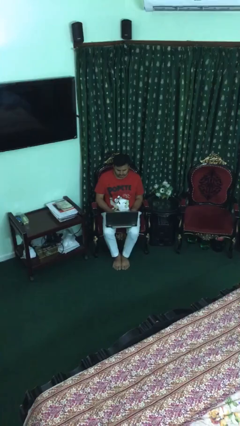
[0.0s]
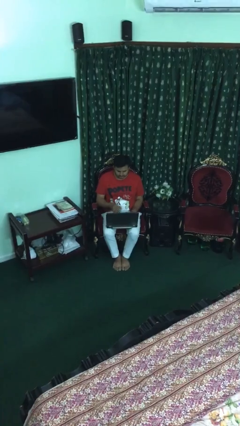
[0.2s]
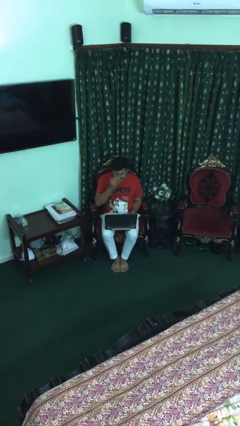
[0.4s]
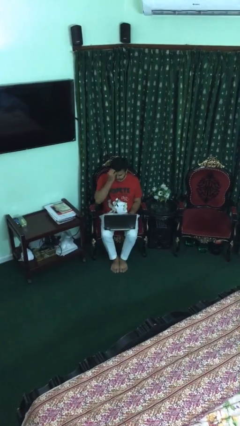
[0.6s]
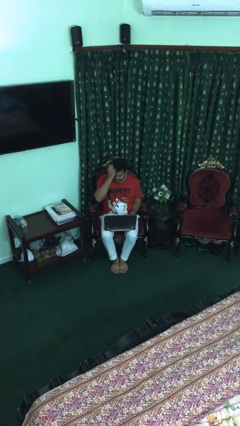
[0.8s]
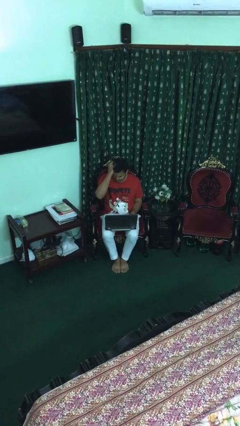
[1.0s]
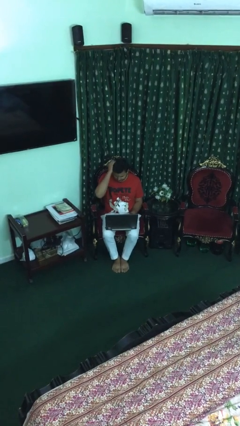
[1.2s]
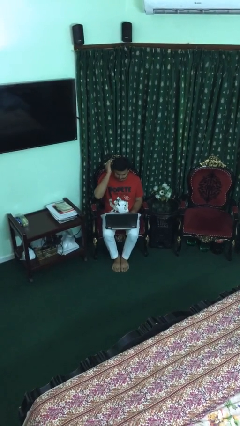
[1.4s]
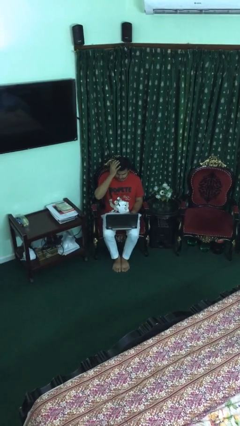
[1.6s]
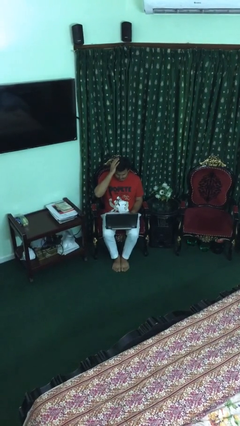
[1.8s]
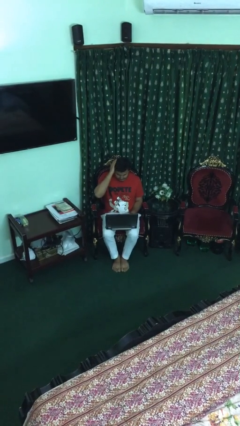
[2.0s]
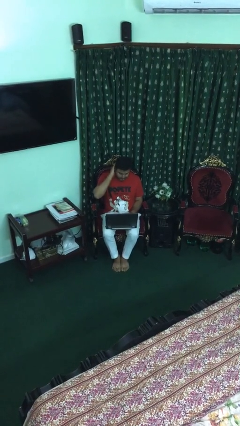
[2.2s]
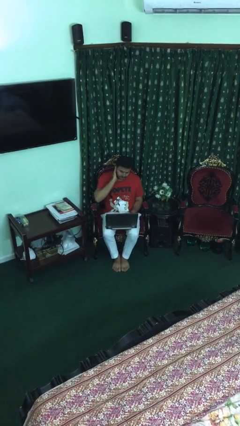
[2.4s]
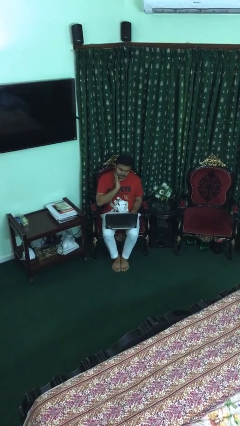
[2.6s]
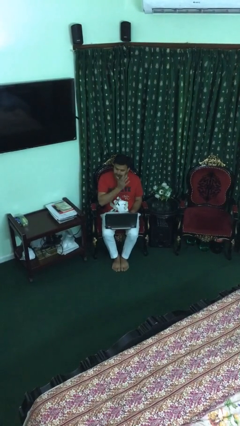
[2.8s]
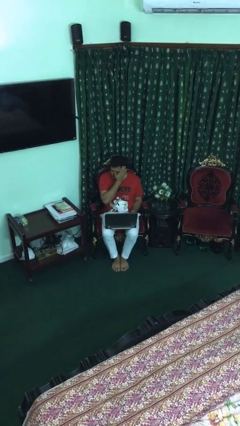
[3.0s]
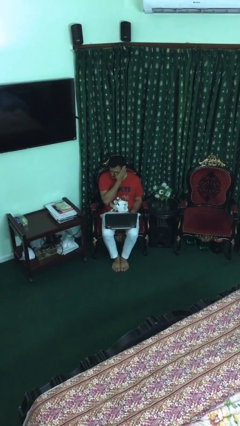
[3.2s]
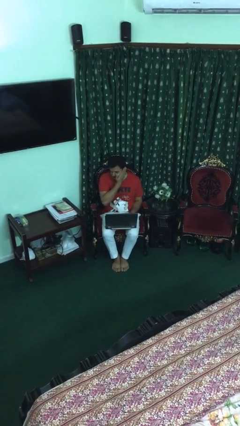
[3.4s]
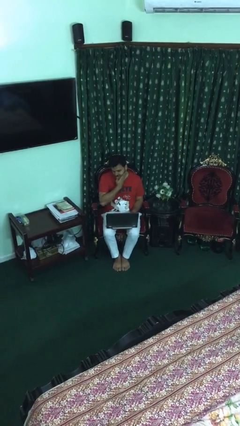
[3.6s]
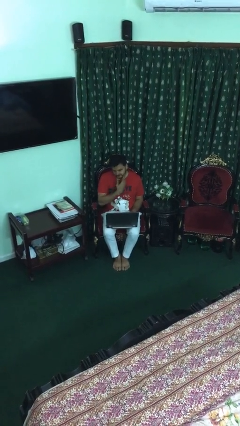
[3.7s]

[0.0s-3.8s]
person interacts with laptop

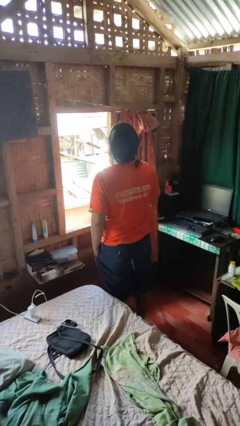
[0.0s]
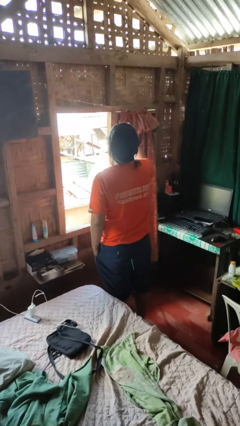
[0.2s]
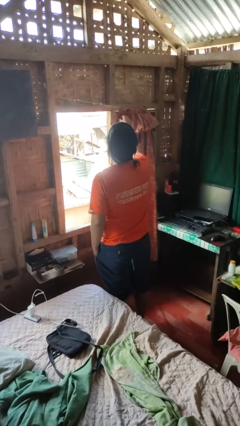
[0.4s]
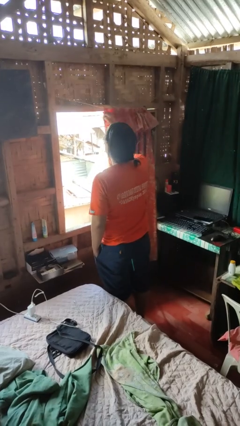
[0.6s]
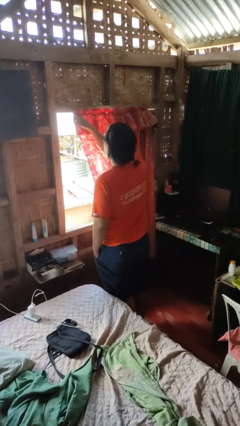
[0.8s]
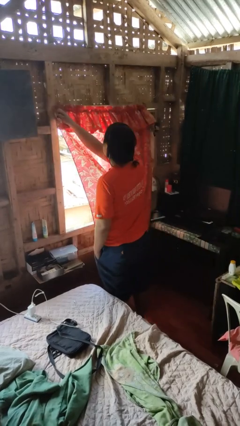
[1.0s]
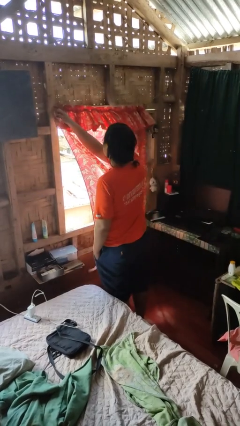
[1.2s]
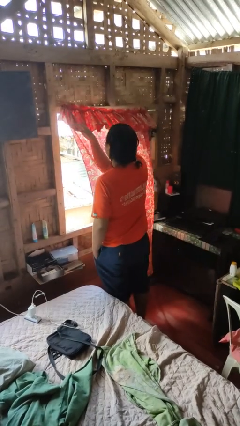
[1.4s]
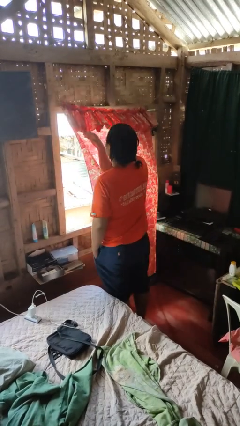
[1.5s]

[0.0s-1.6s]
person closes curtains

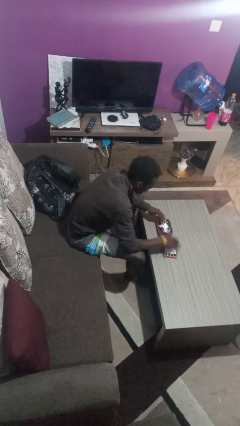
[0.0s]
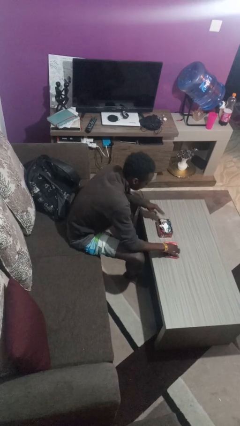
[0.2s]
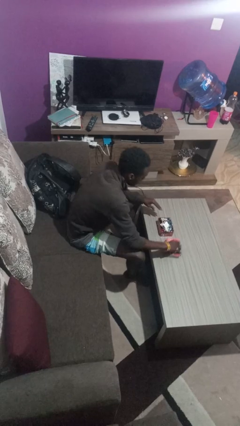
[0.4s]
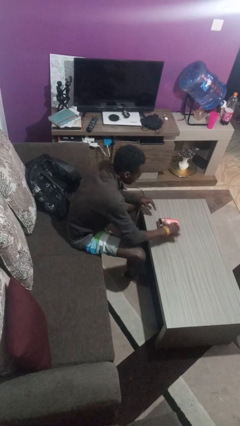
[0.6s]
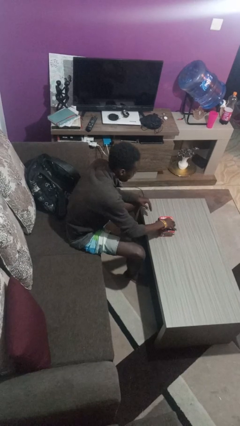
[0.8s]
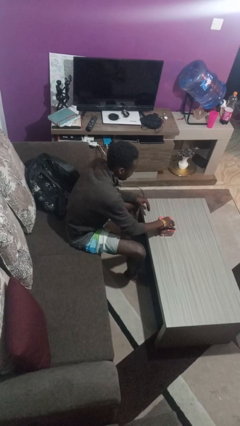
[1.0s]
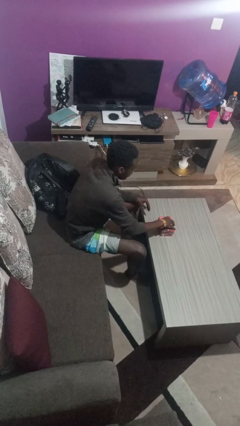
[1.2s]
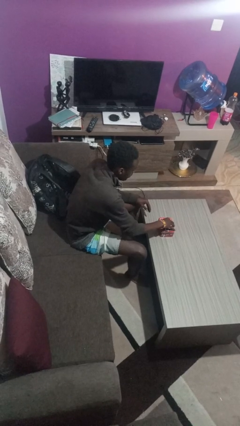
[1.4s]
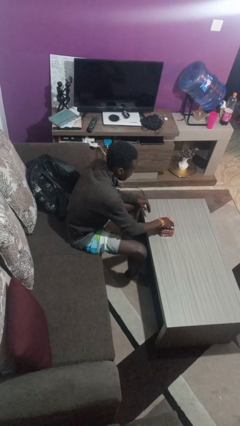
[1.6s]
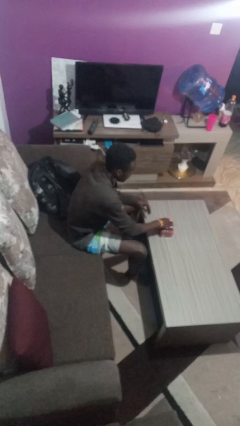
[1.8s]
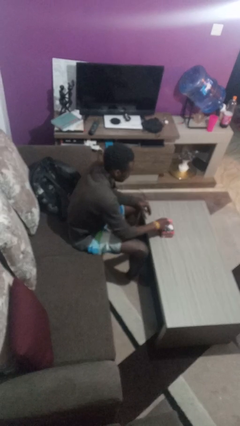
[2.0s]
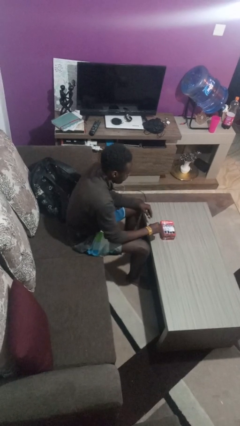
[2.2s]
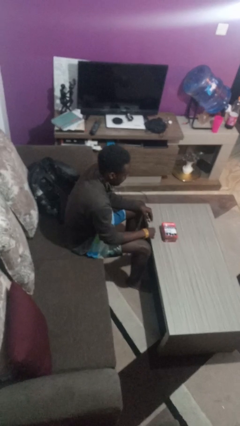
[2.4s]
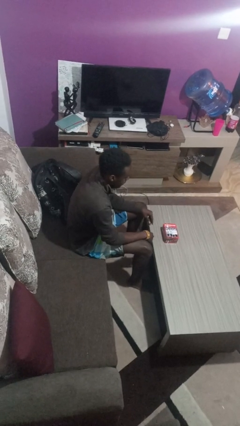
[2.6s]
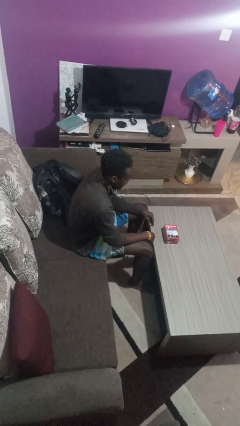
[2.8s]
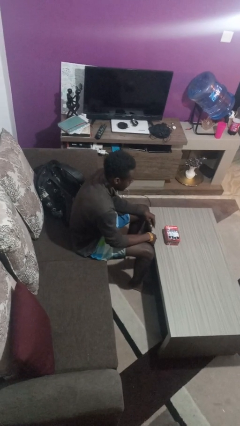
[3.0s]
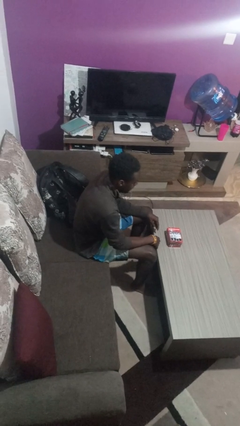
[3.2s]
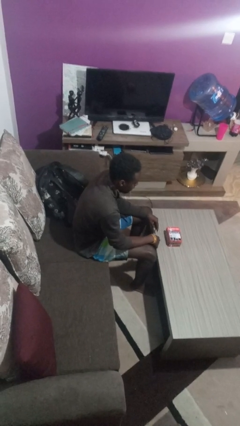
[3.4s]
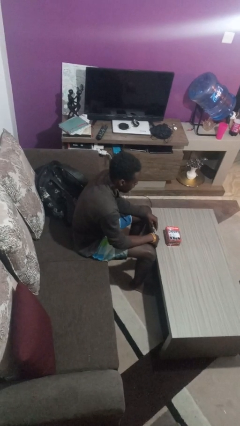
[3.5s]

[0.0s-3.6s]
person closes jewelry box

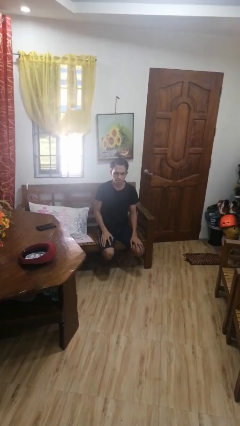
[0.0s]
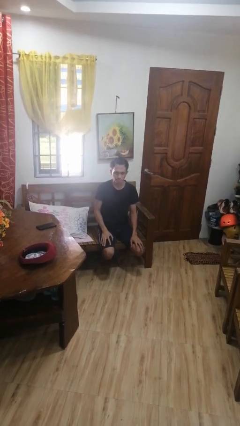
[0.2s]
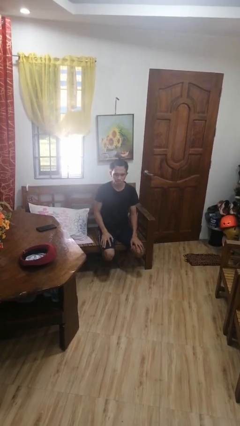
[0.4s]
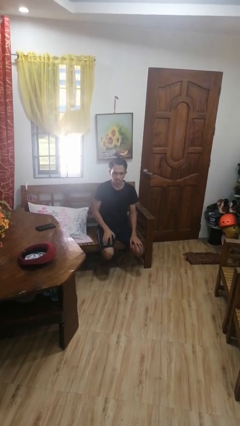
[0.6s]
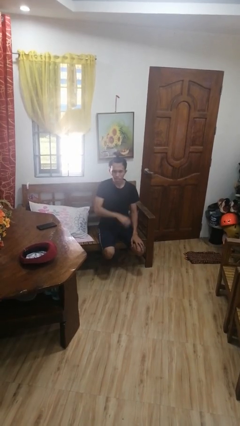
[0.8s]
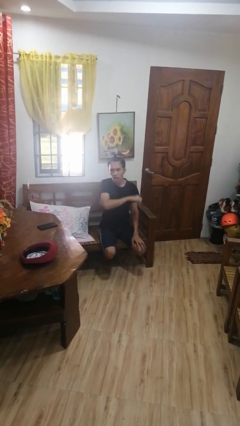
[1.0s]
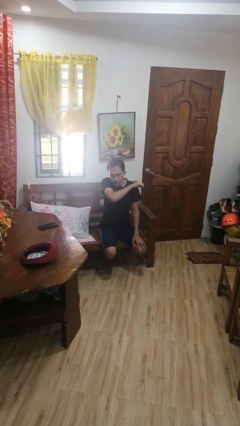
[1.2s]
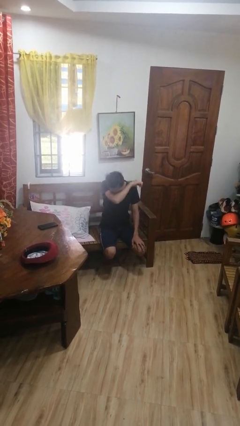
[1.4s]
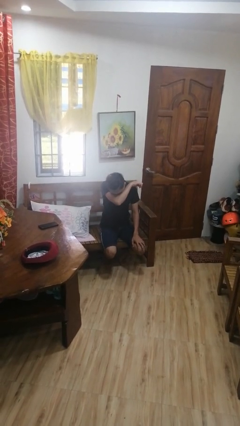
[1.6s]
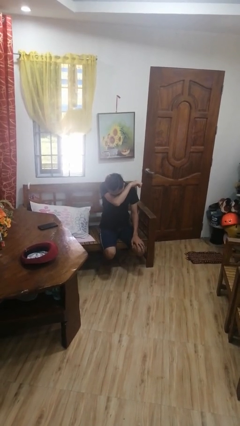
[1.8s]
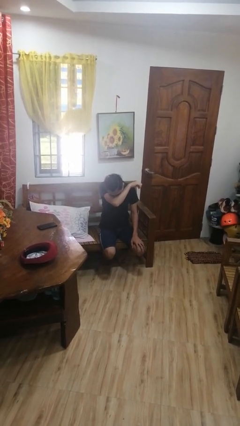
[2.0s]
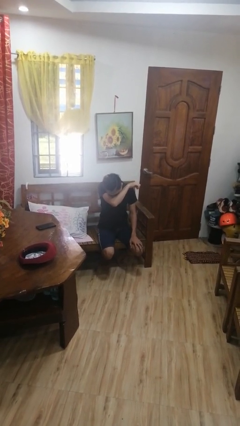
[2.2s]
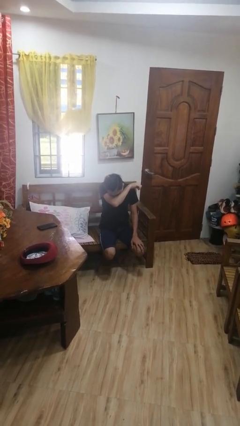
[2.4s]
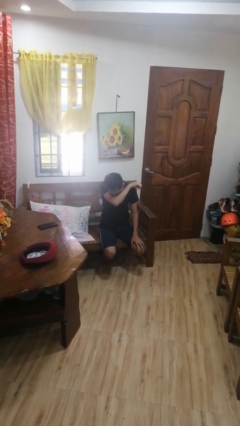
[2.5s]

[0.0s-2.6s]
person sneezes into arm

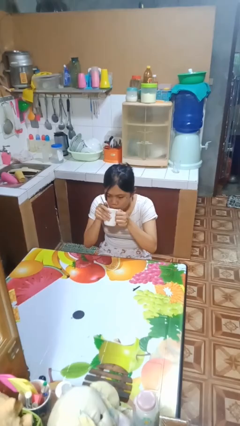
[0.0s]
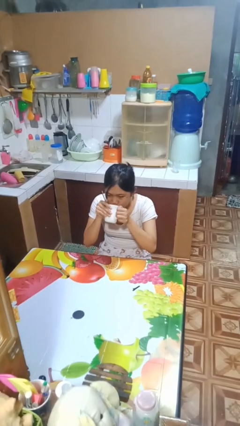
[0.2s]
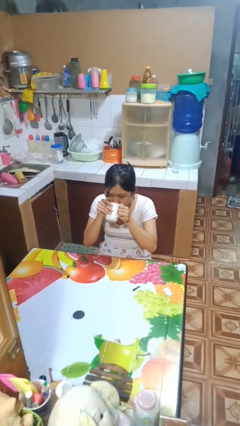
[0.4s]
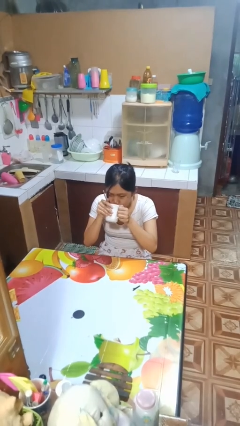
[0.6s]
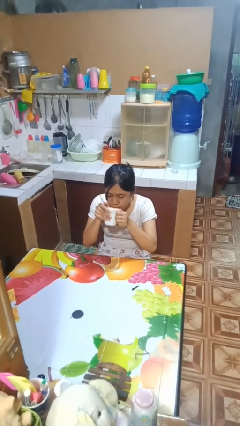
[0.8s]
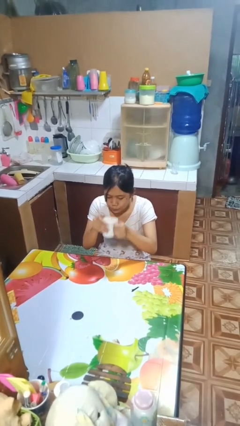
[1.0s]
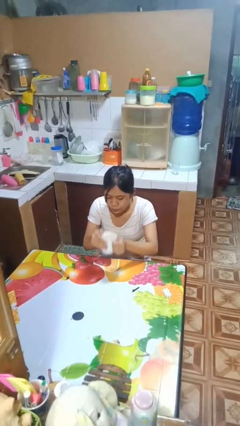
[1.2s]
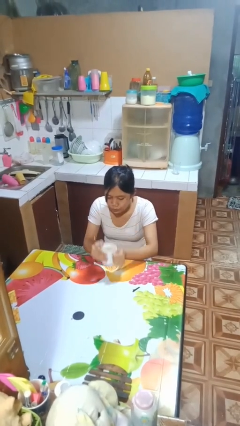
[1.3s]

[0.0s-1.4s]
person drinks from mug

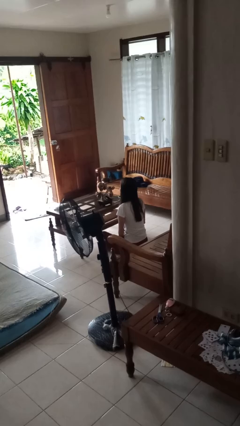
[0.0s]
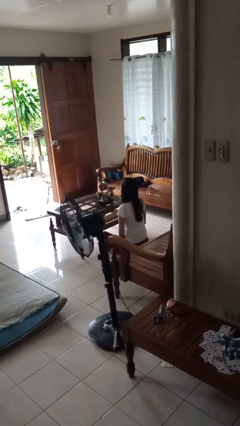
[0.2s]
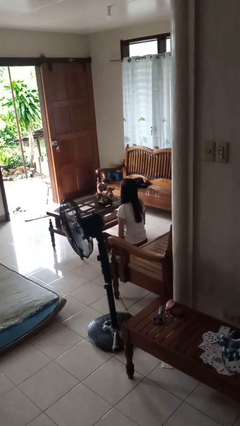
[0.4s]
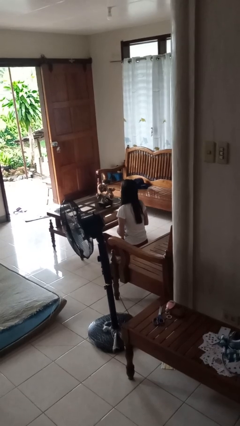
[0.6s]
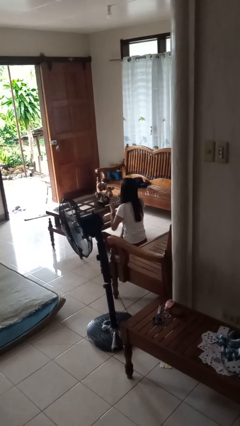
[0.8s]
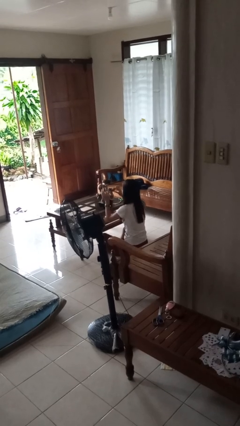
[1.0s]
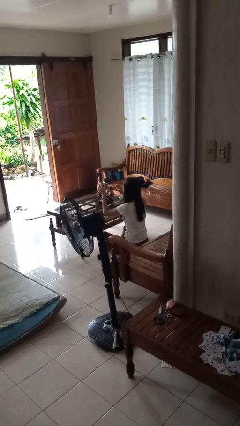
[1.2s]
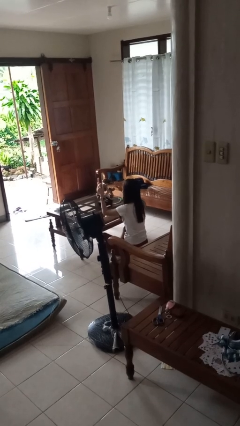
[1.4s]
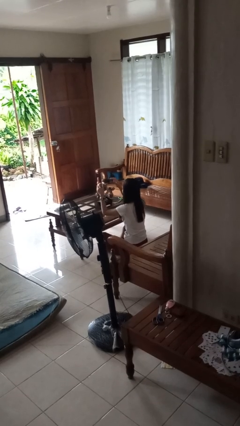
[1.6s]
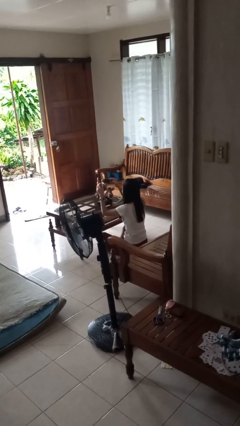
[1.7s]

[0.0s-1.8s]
person arranges flowers in vase

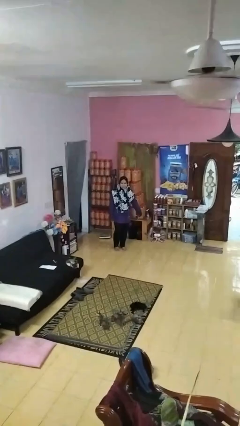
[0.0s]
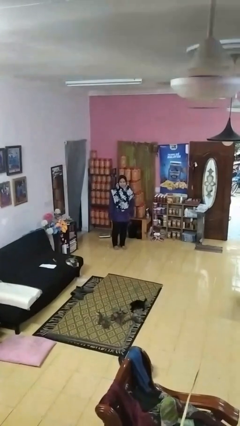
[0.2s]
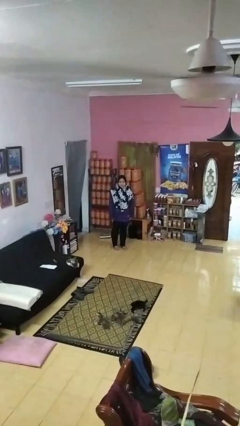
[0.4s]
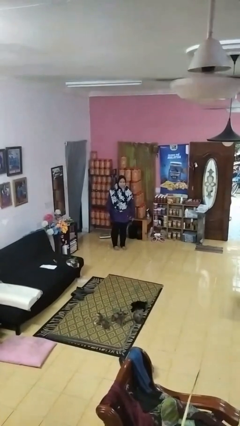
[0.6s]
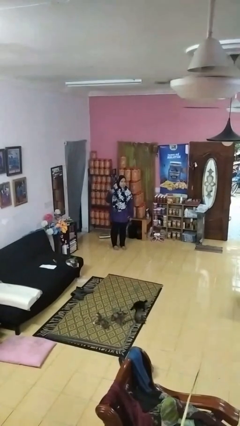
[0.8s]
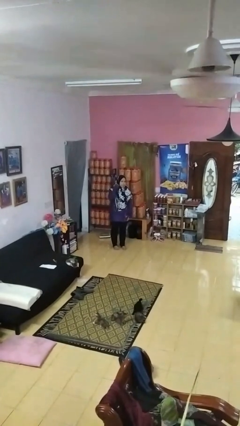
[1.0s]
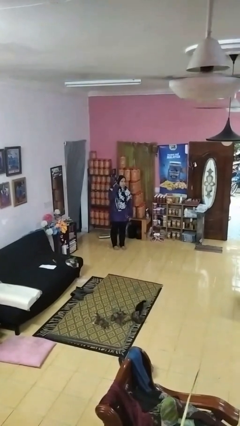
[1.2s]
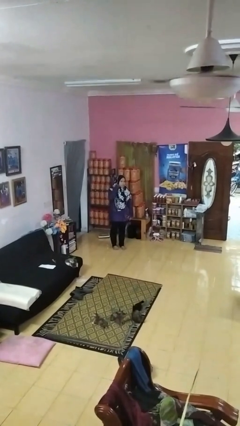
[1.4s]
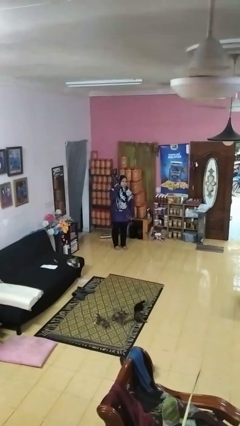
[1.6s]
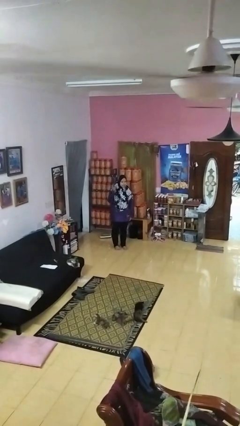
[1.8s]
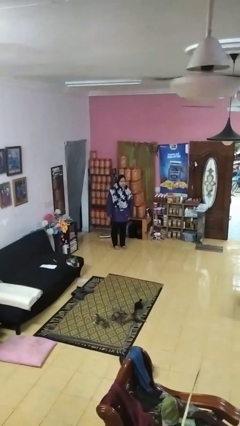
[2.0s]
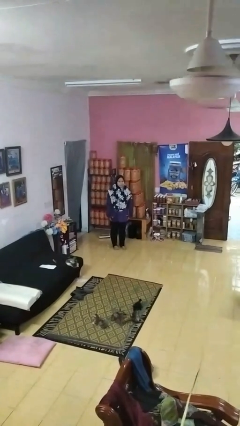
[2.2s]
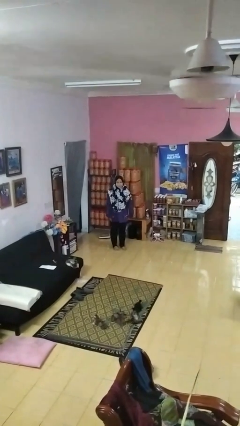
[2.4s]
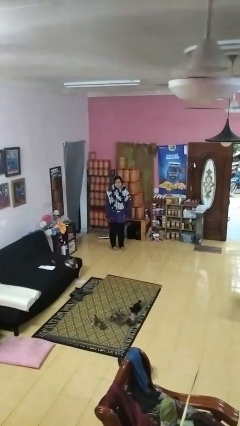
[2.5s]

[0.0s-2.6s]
person gestures listen closely
